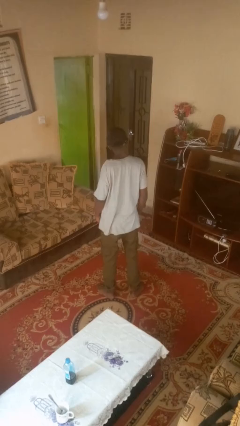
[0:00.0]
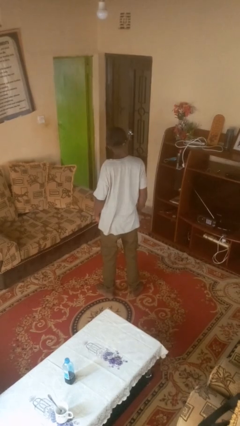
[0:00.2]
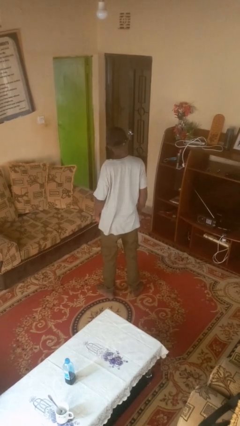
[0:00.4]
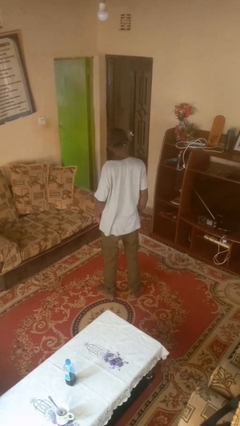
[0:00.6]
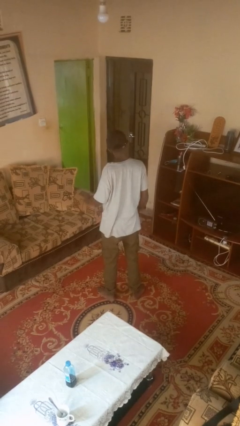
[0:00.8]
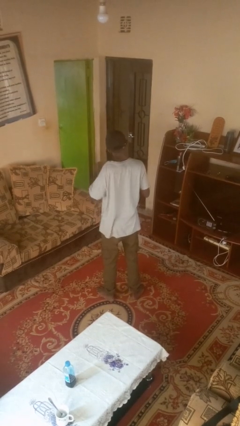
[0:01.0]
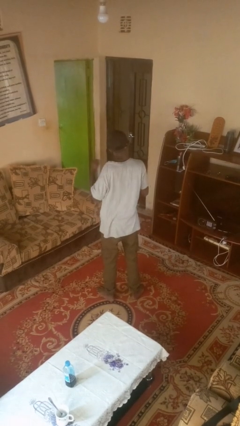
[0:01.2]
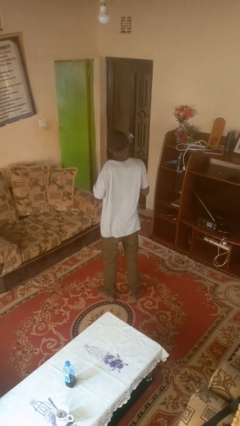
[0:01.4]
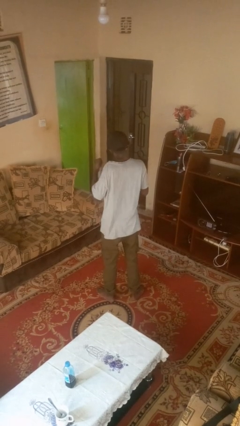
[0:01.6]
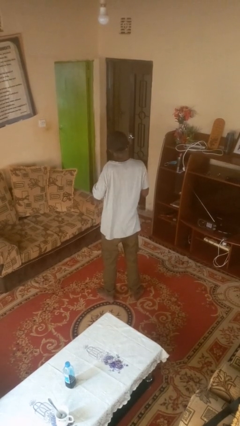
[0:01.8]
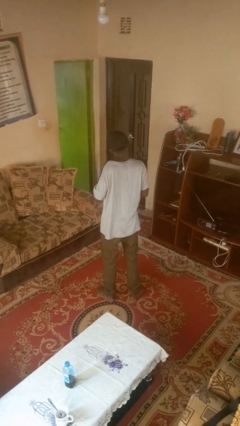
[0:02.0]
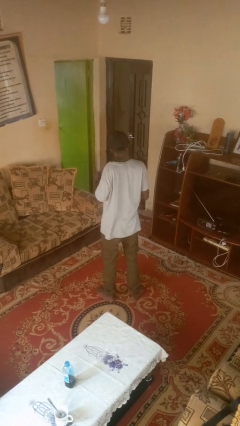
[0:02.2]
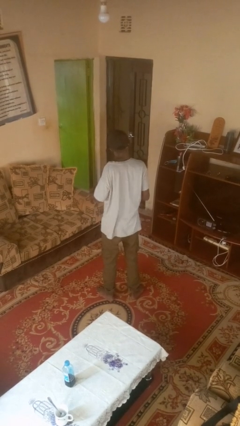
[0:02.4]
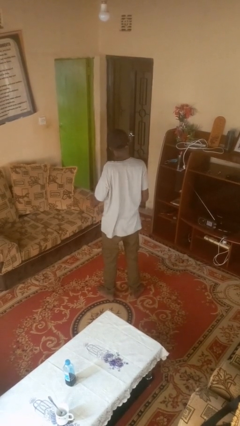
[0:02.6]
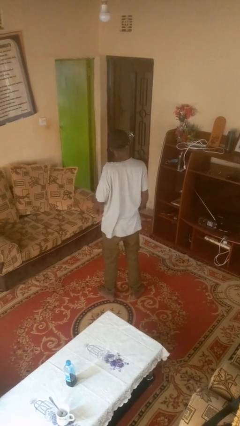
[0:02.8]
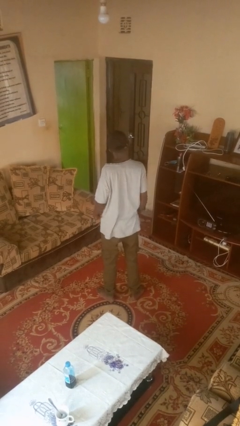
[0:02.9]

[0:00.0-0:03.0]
person drums on chest

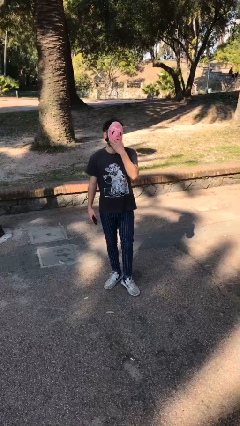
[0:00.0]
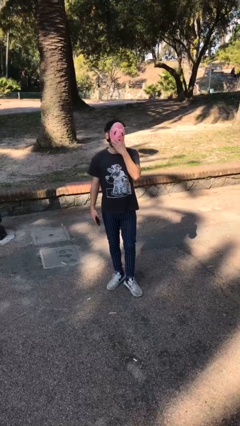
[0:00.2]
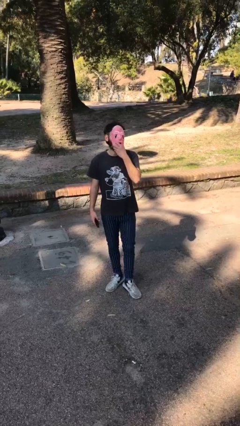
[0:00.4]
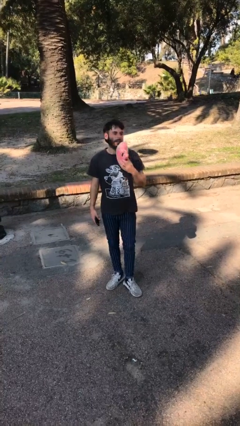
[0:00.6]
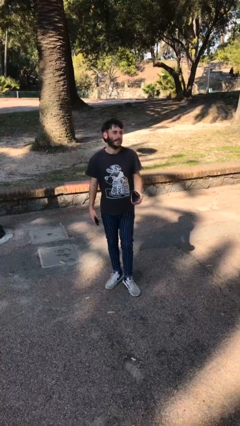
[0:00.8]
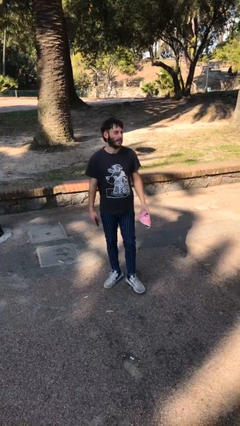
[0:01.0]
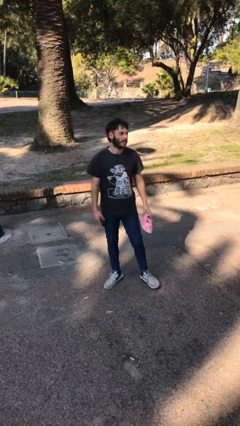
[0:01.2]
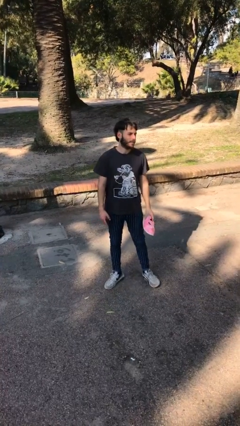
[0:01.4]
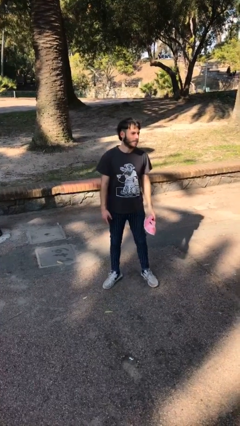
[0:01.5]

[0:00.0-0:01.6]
person takes off facemask

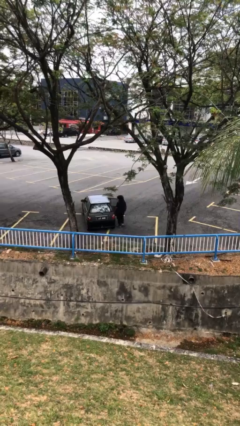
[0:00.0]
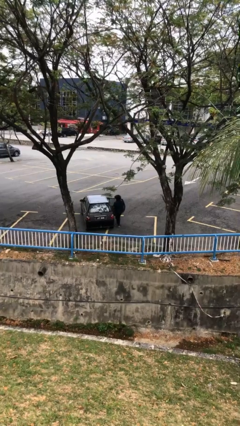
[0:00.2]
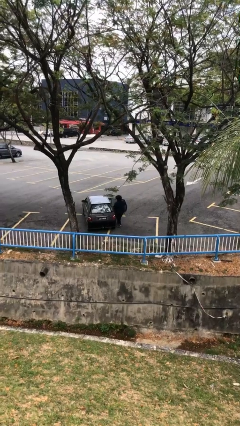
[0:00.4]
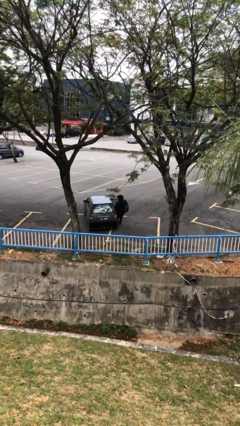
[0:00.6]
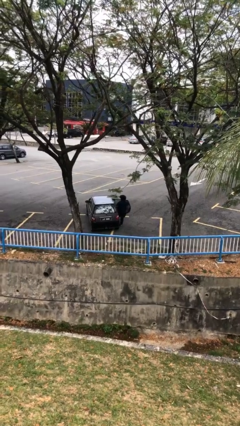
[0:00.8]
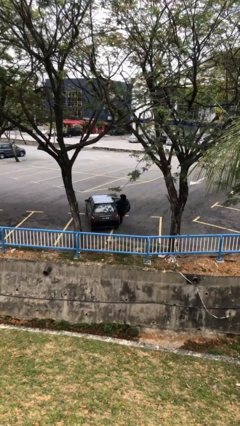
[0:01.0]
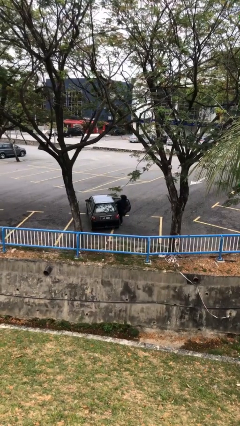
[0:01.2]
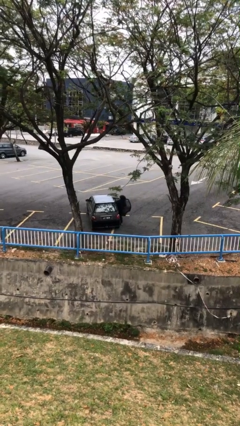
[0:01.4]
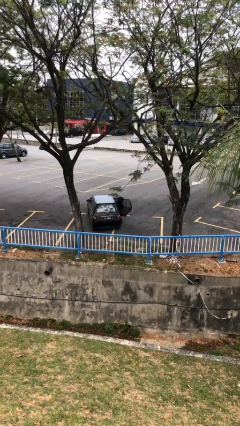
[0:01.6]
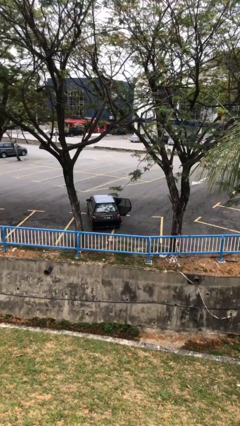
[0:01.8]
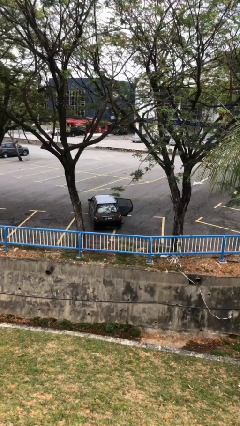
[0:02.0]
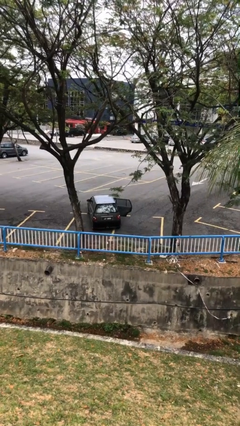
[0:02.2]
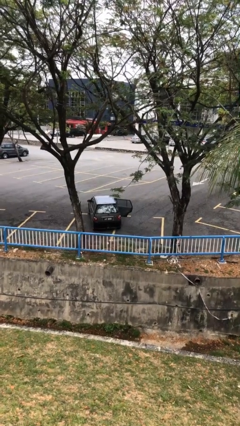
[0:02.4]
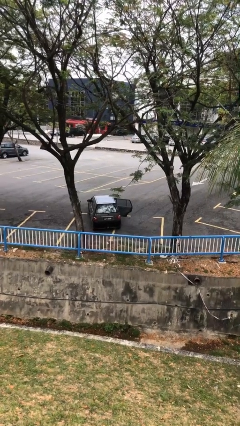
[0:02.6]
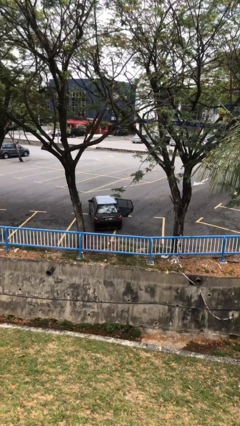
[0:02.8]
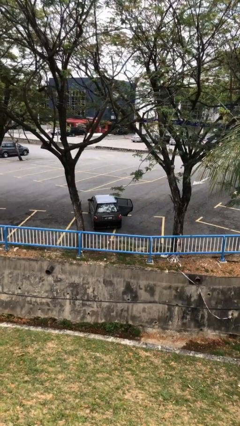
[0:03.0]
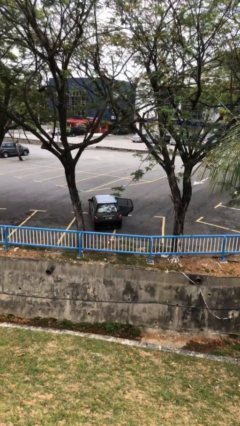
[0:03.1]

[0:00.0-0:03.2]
person enters car

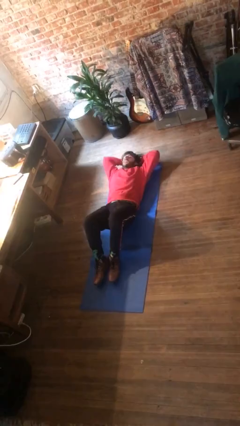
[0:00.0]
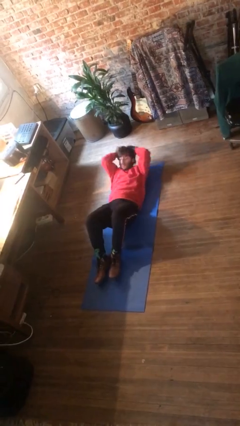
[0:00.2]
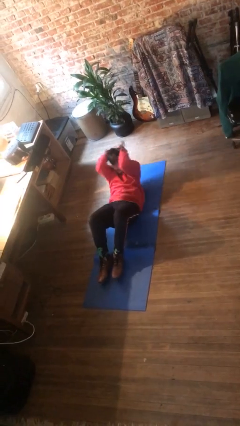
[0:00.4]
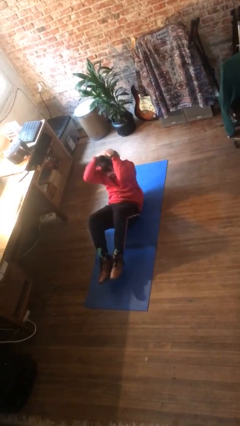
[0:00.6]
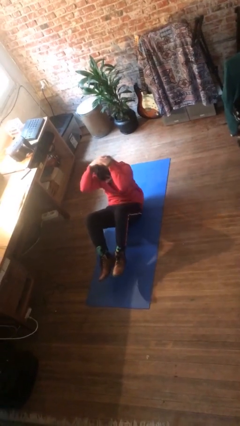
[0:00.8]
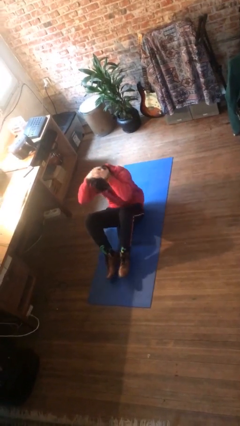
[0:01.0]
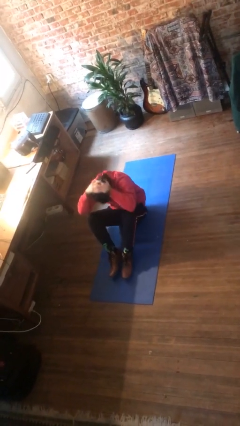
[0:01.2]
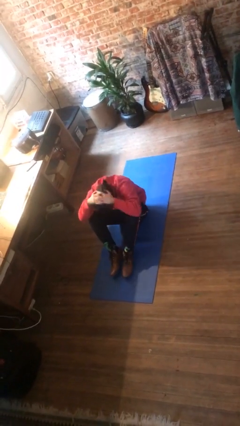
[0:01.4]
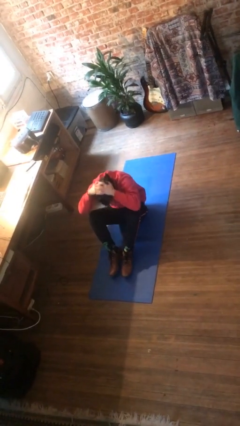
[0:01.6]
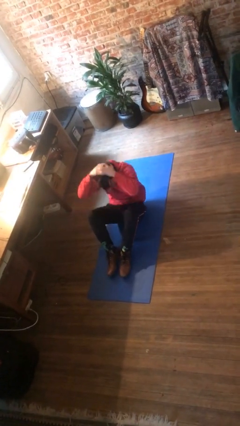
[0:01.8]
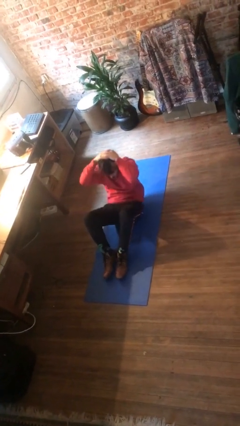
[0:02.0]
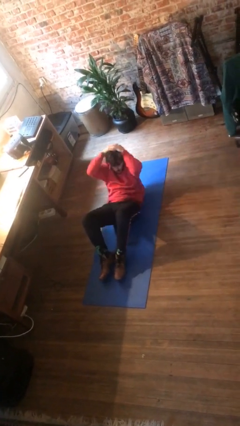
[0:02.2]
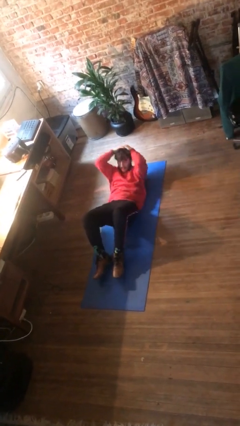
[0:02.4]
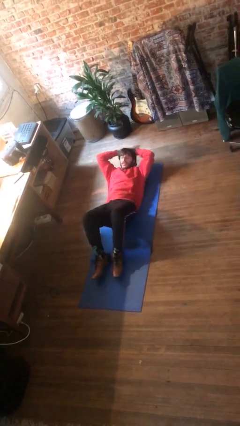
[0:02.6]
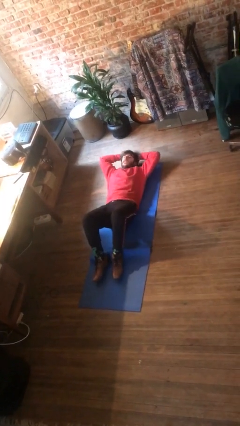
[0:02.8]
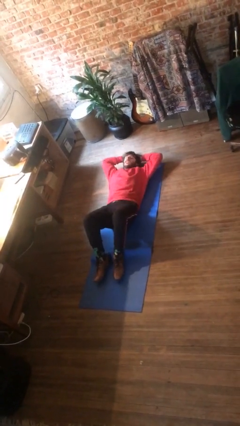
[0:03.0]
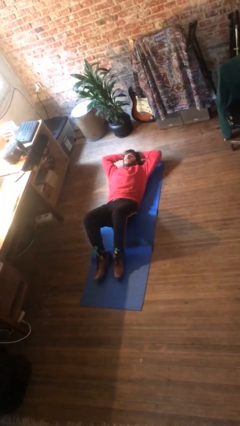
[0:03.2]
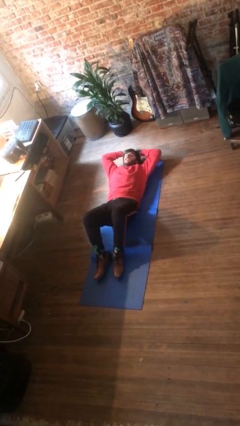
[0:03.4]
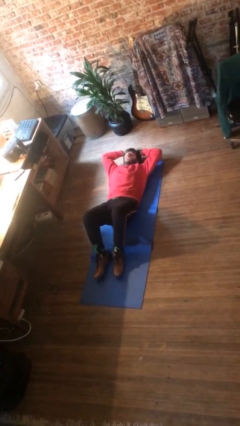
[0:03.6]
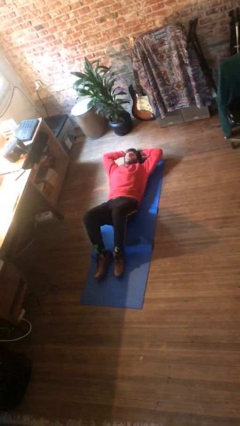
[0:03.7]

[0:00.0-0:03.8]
person exercises with situp

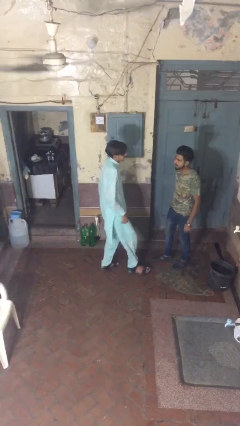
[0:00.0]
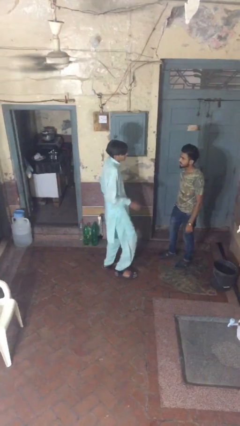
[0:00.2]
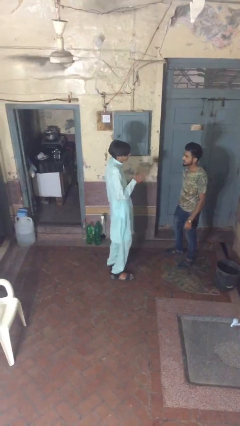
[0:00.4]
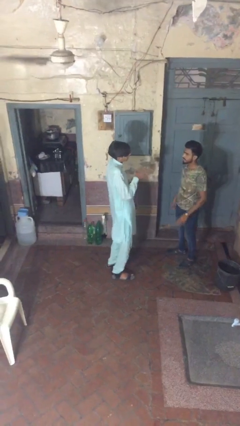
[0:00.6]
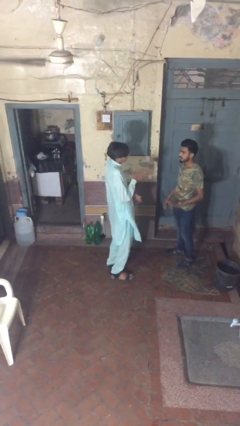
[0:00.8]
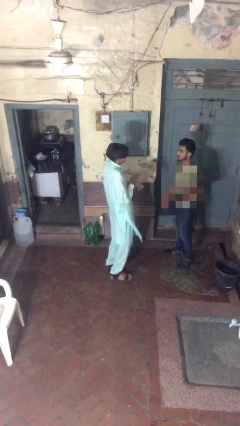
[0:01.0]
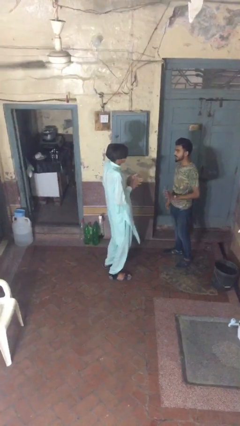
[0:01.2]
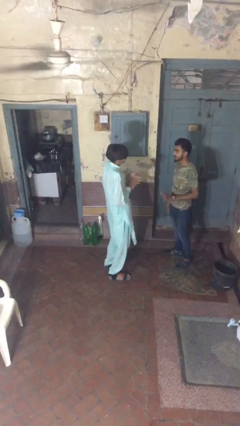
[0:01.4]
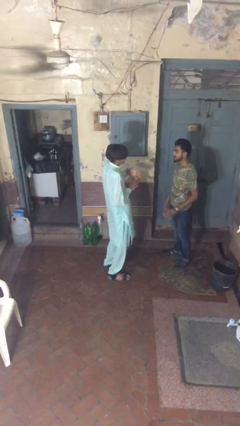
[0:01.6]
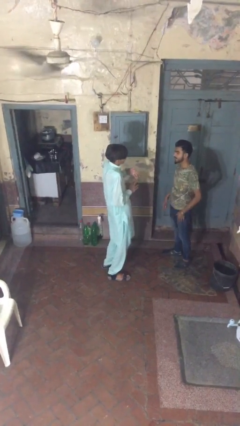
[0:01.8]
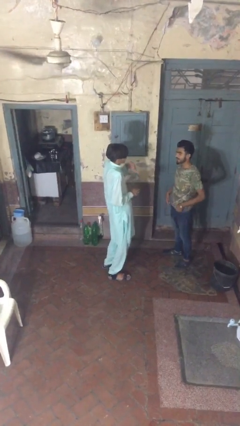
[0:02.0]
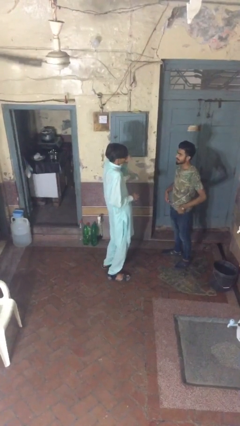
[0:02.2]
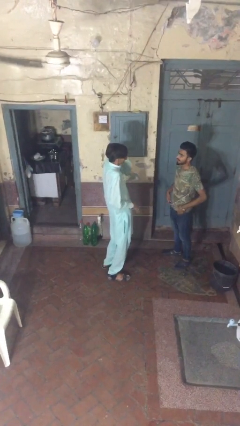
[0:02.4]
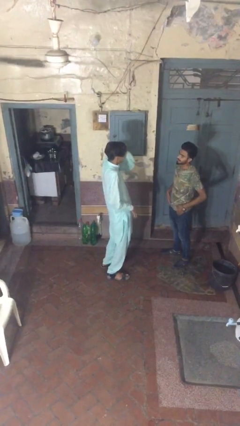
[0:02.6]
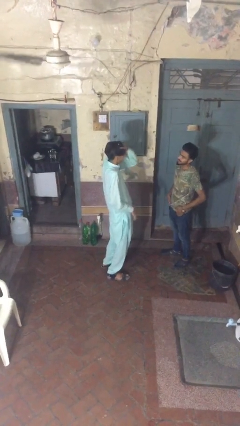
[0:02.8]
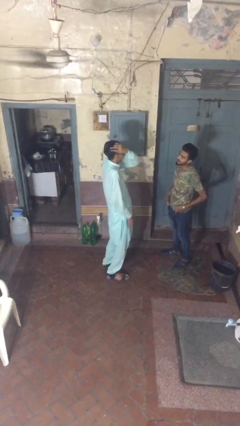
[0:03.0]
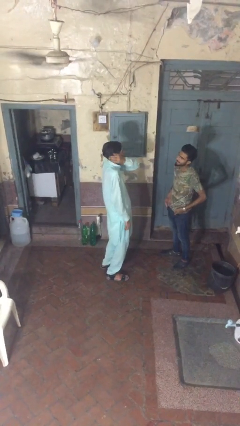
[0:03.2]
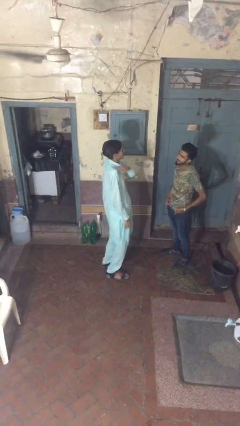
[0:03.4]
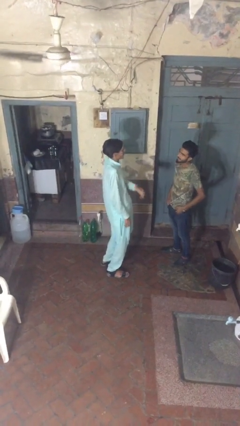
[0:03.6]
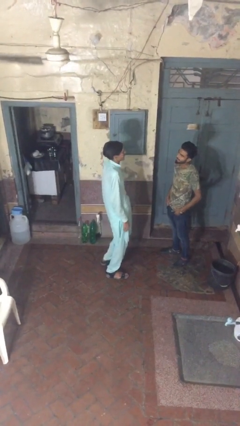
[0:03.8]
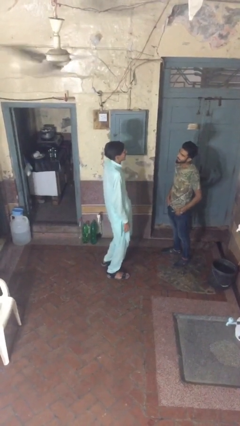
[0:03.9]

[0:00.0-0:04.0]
person talks to person

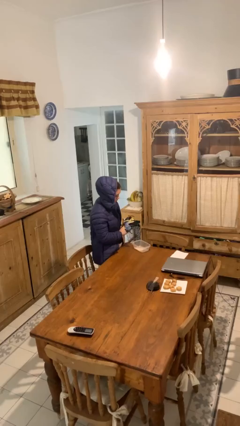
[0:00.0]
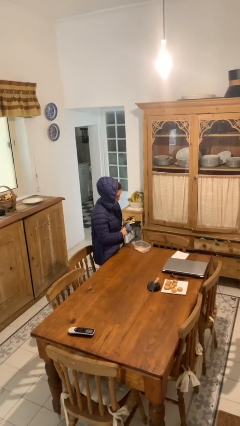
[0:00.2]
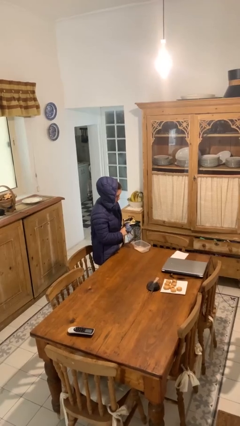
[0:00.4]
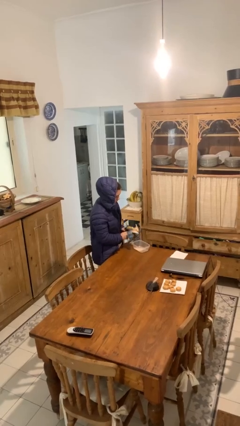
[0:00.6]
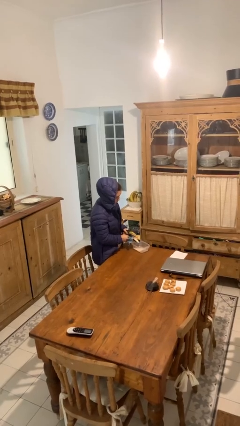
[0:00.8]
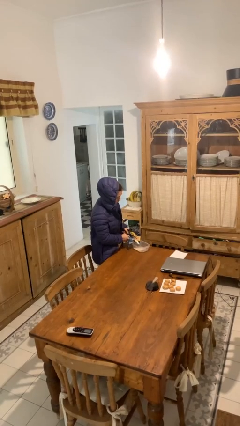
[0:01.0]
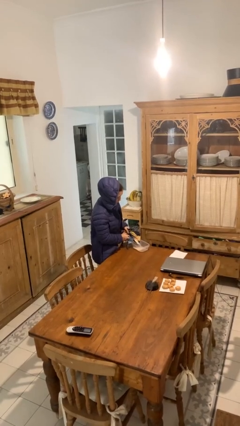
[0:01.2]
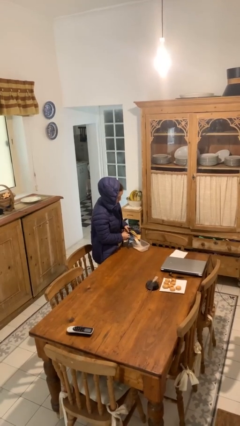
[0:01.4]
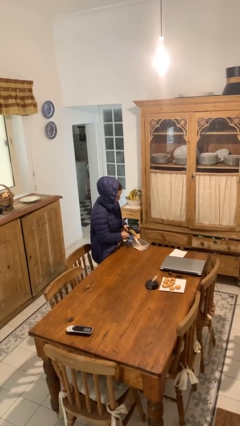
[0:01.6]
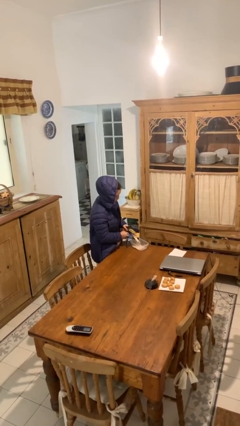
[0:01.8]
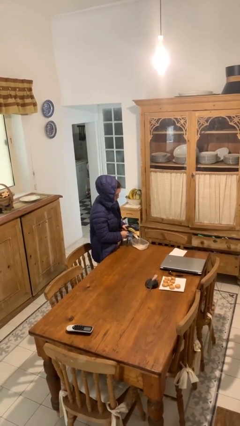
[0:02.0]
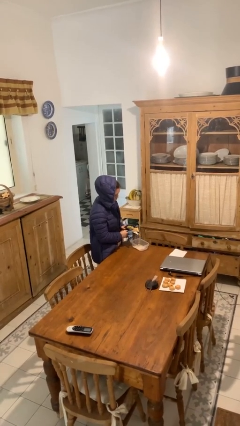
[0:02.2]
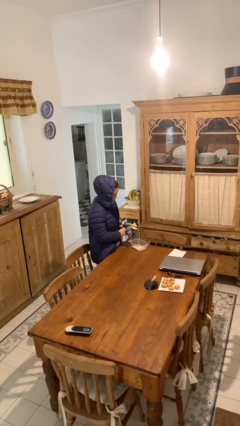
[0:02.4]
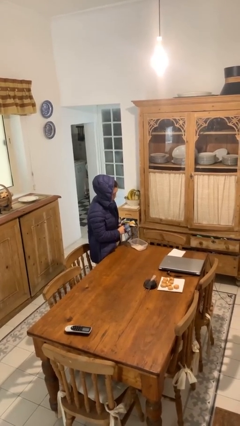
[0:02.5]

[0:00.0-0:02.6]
person pours into bowl
